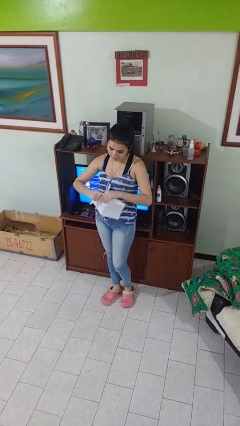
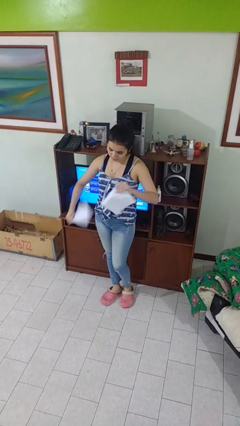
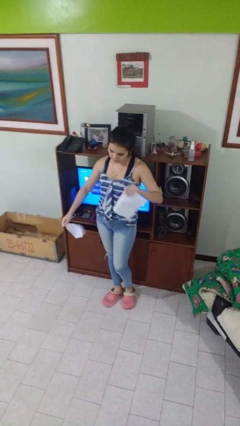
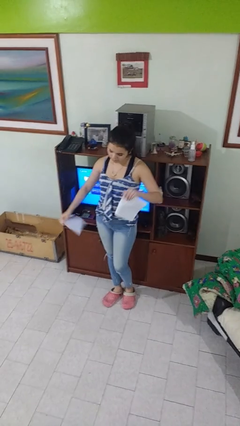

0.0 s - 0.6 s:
person tears paper

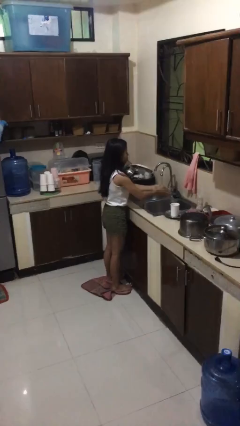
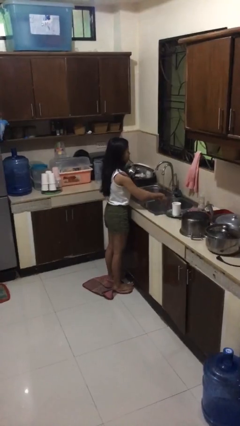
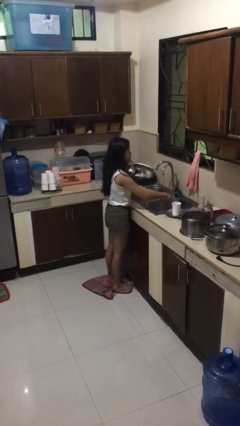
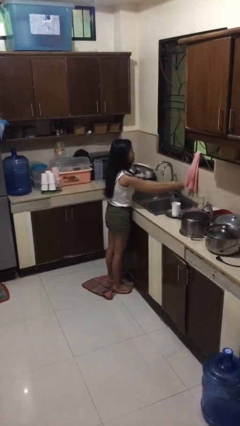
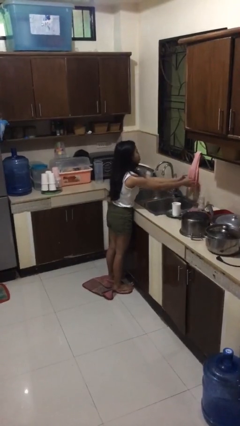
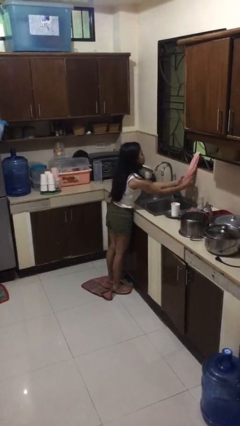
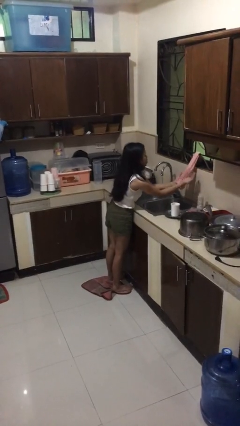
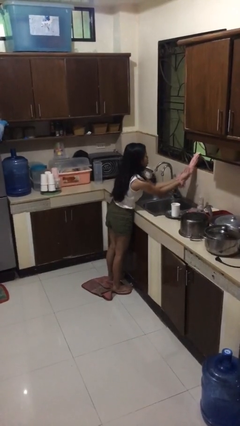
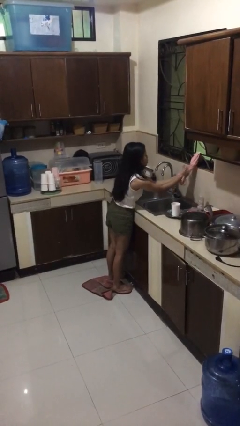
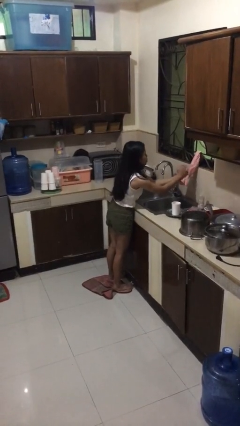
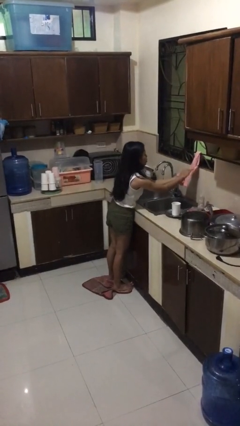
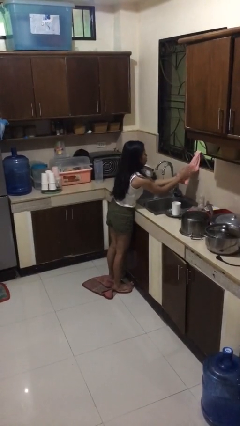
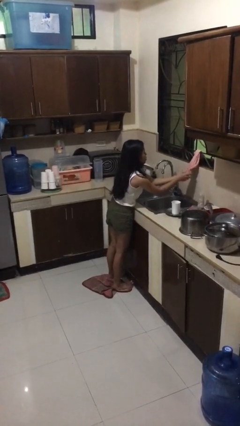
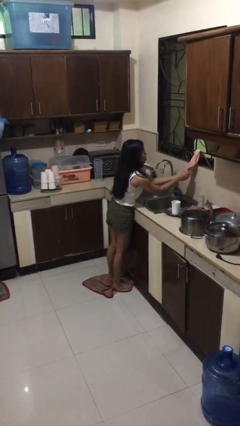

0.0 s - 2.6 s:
person dries hands with towel

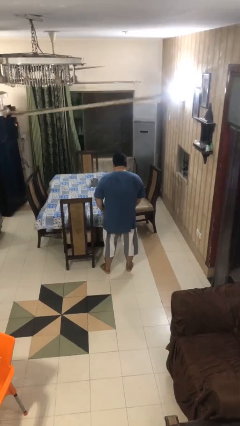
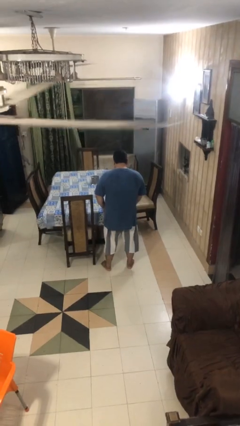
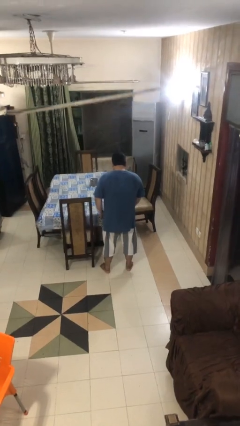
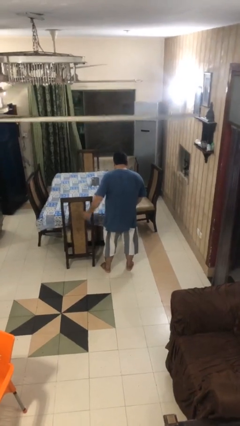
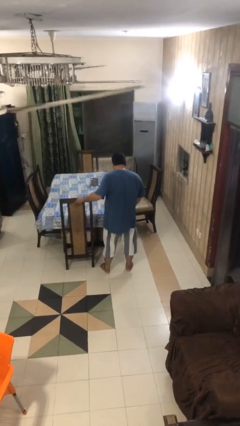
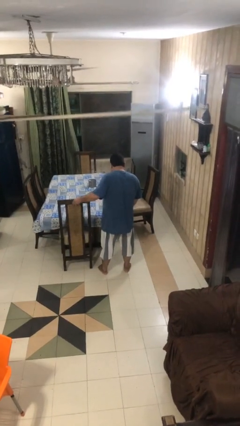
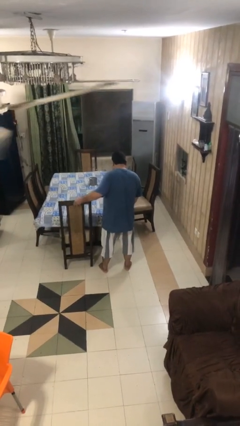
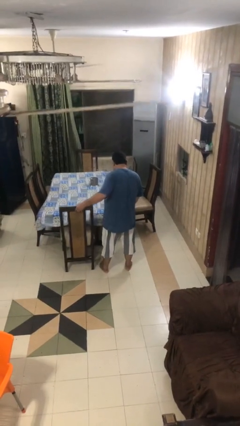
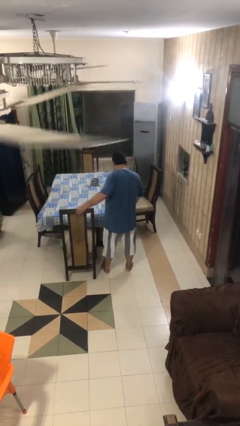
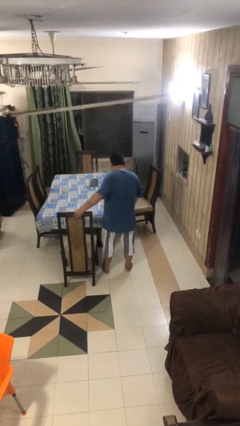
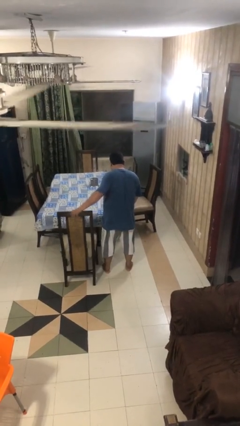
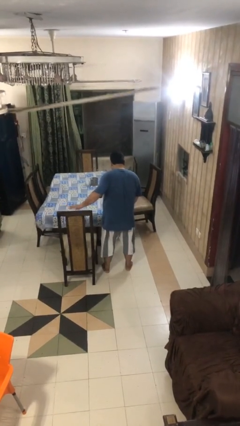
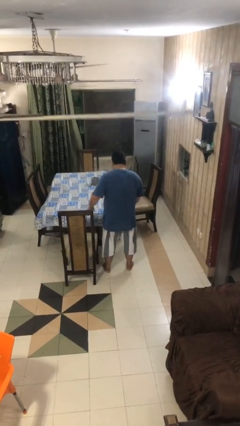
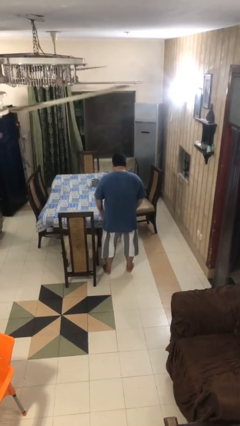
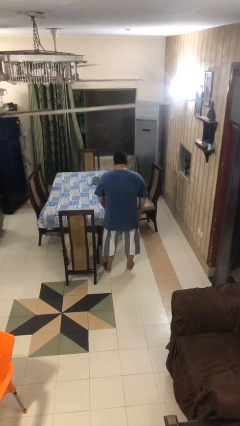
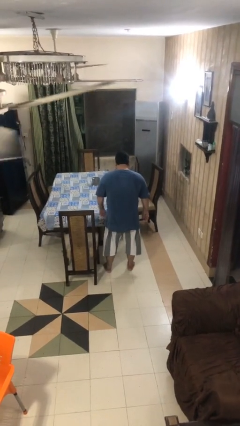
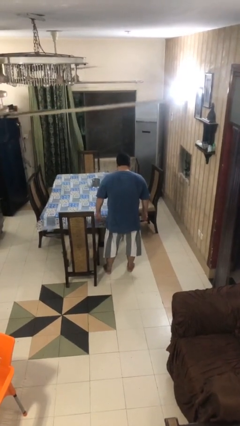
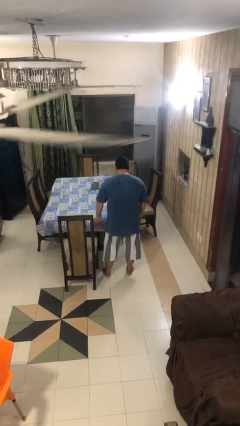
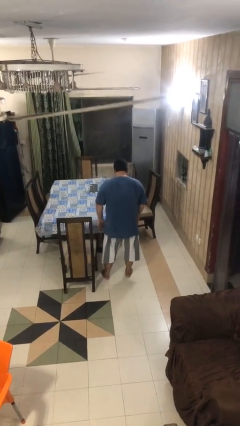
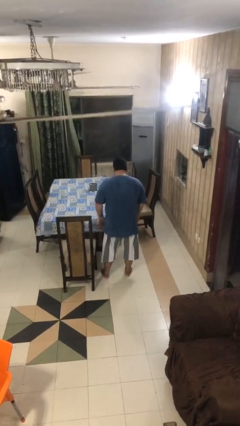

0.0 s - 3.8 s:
person pulls out chair

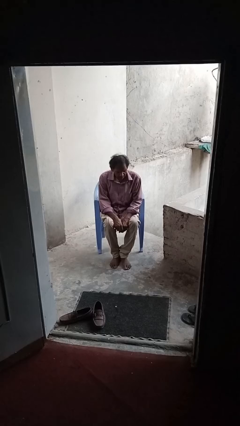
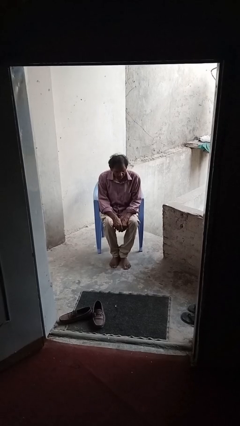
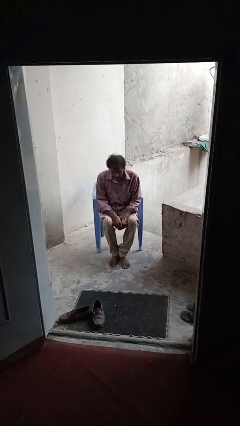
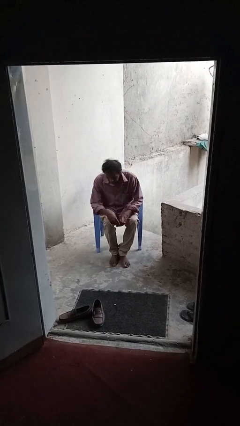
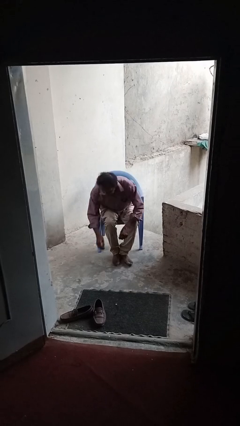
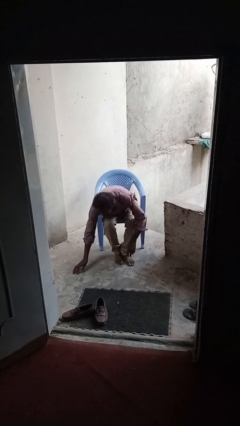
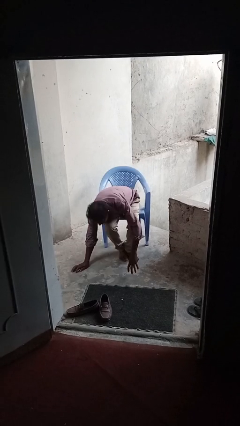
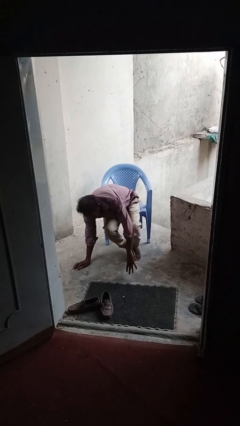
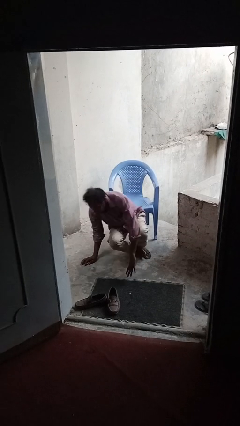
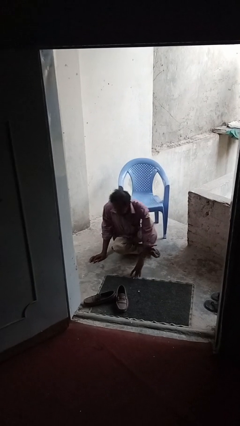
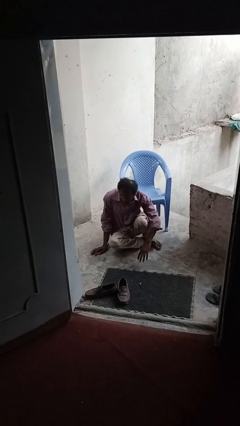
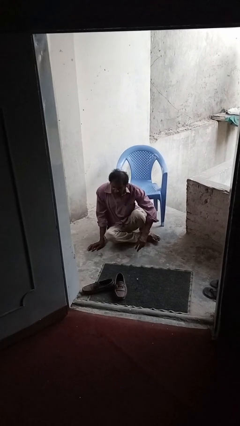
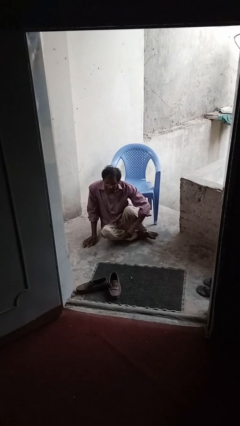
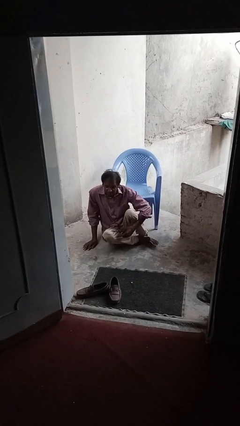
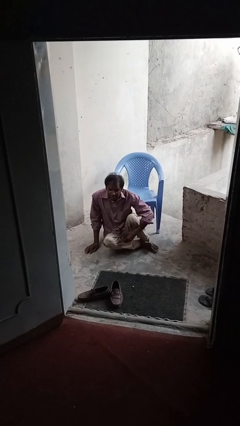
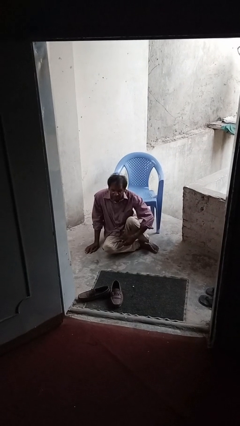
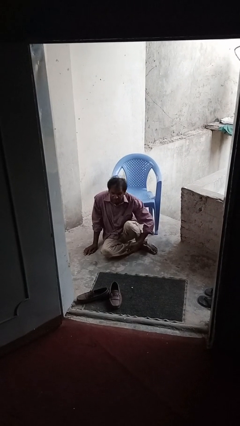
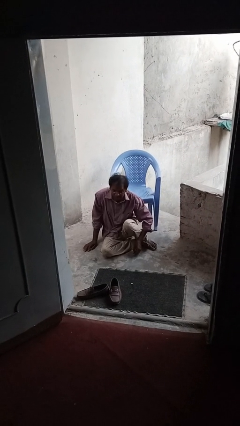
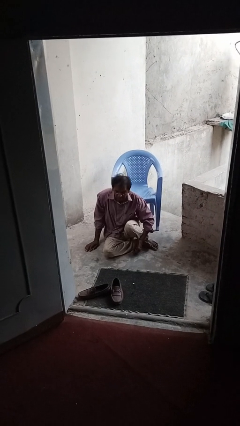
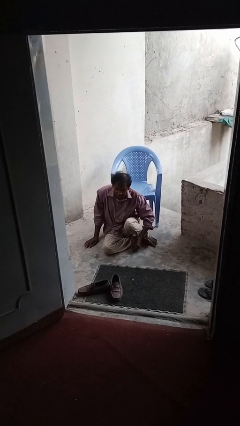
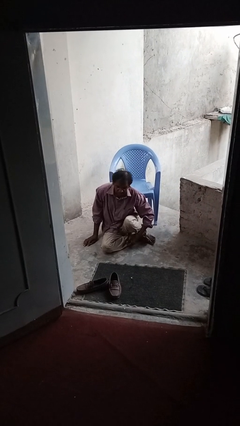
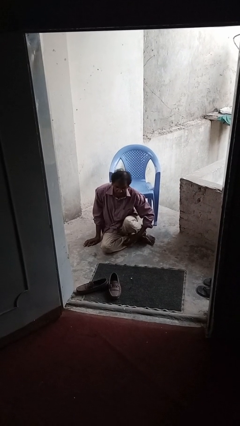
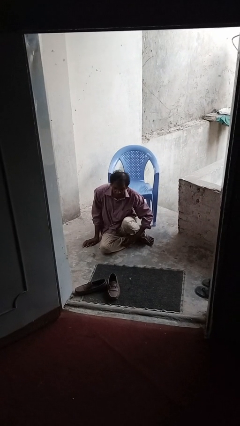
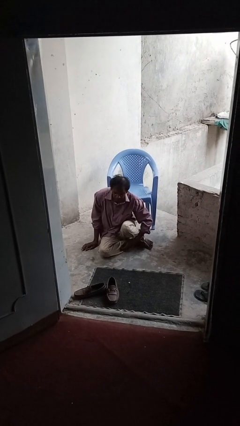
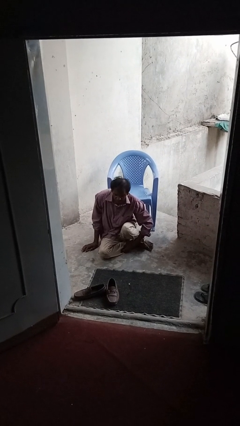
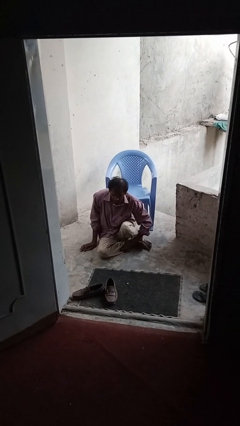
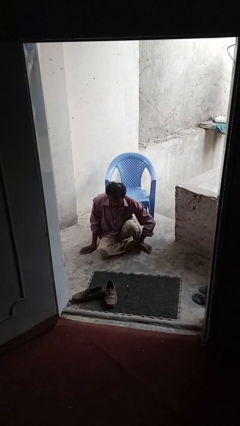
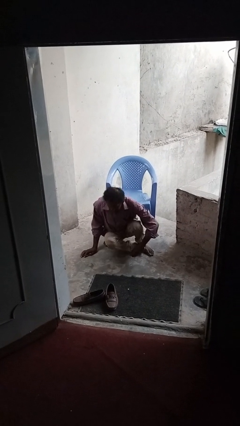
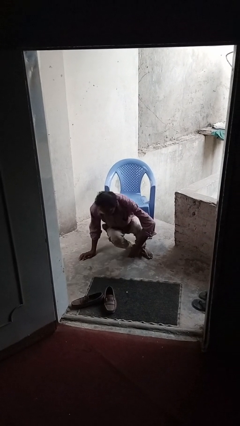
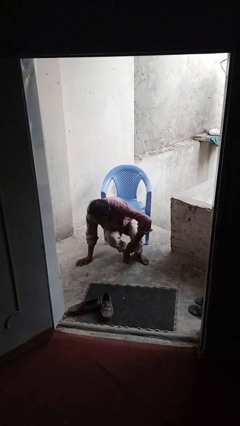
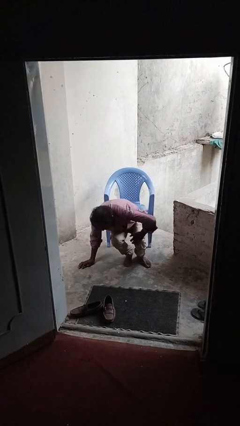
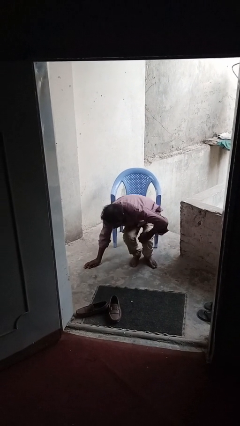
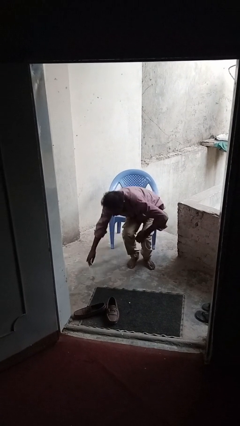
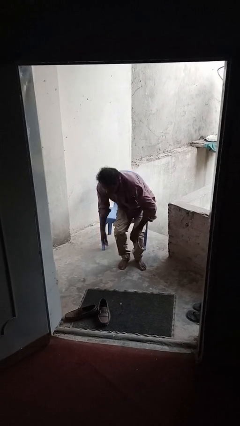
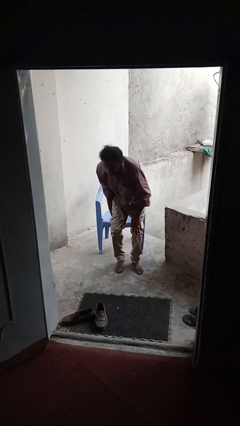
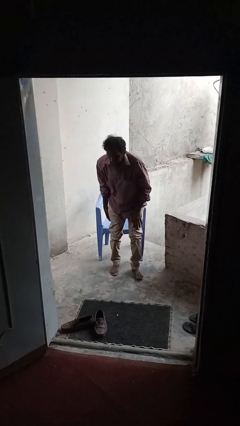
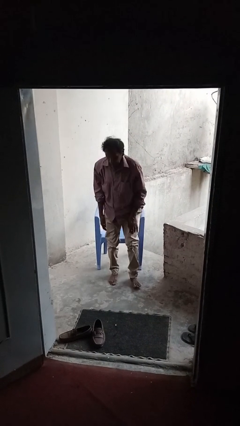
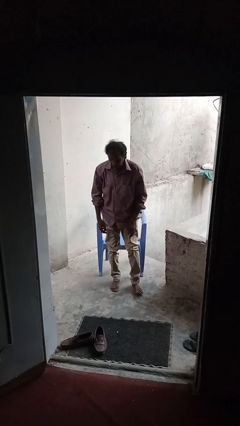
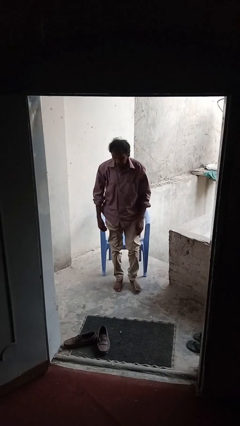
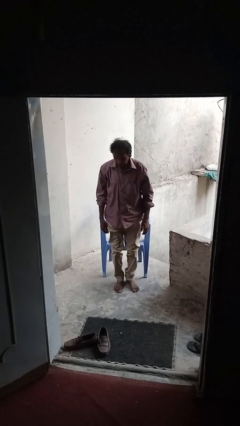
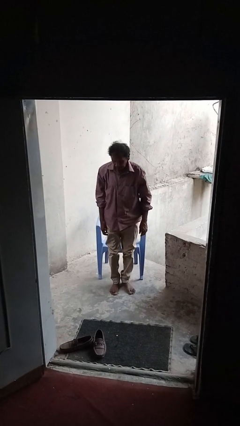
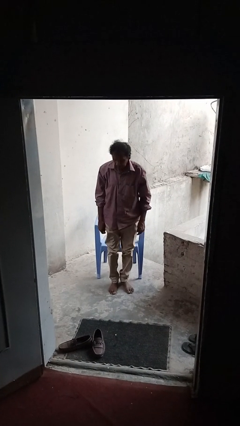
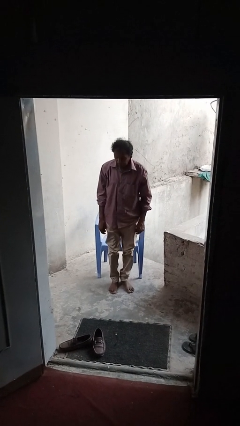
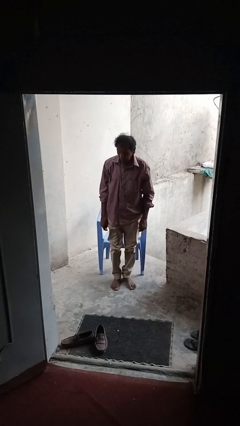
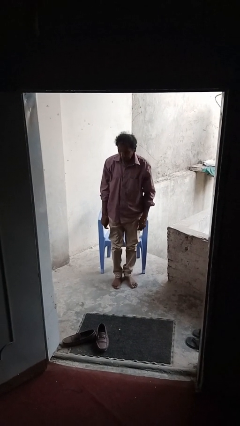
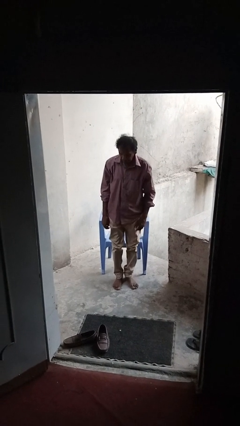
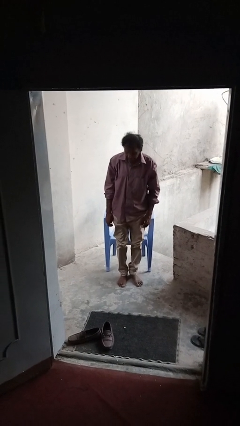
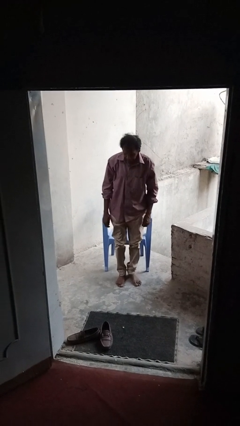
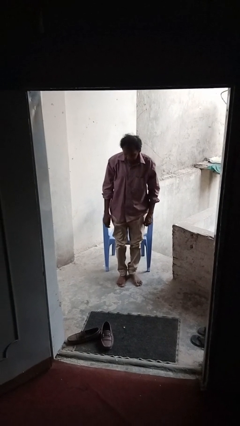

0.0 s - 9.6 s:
person falls from chair

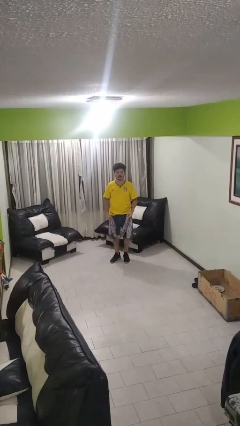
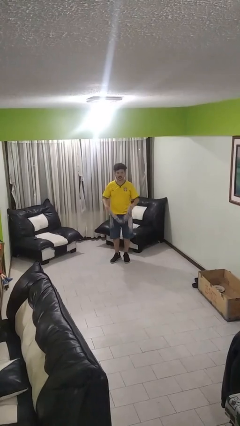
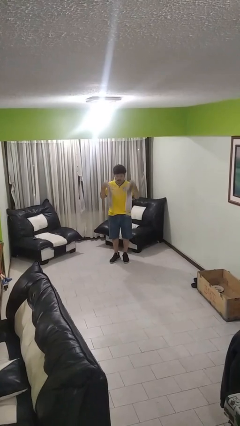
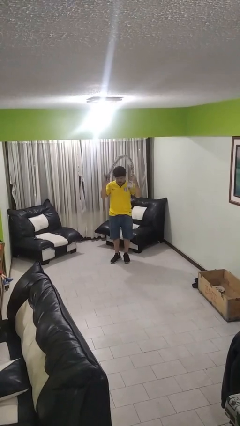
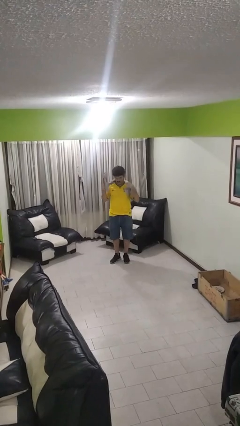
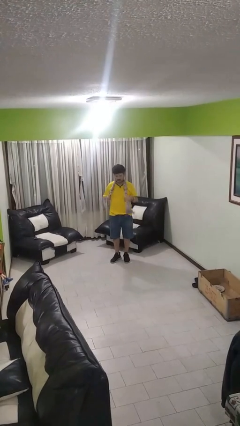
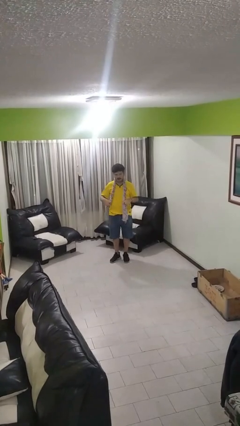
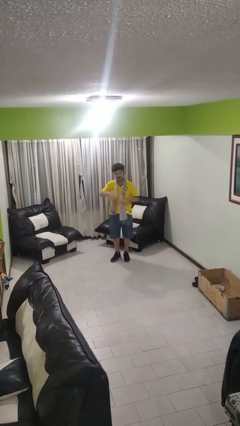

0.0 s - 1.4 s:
person puts on scarf
